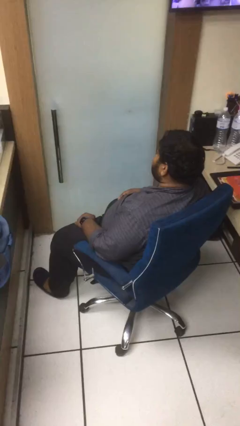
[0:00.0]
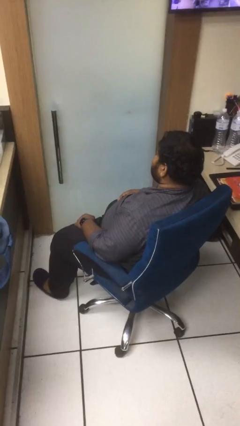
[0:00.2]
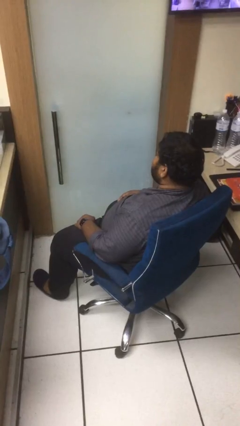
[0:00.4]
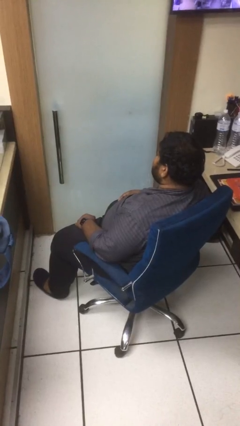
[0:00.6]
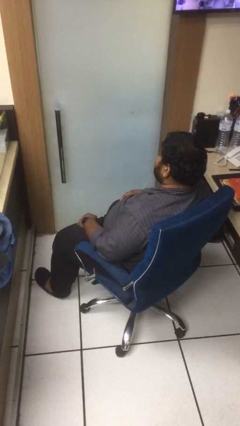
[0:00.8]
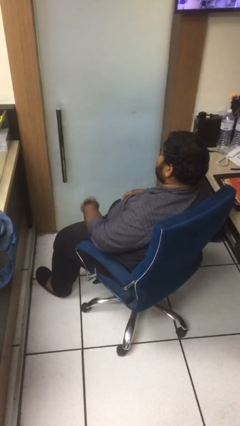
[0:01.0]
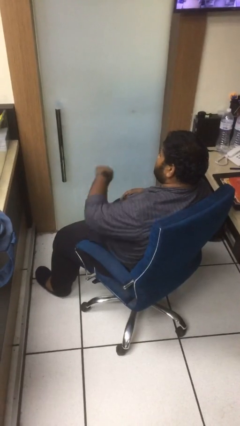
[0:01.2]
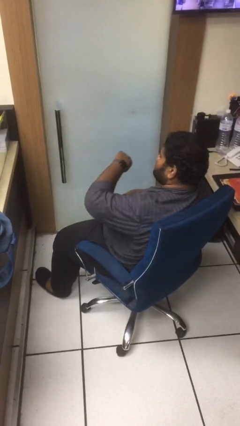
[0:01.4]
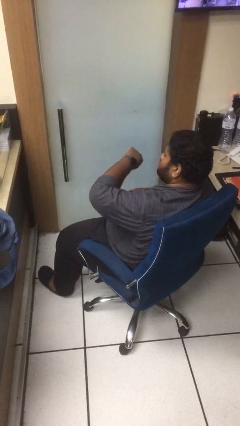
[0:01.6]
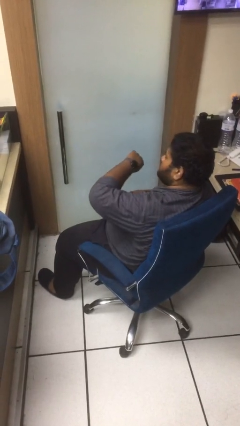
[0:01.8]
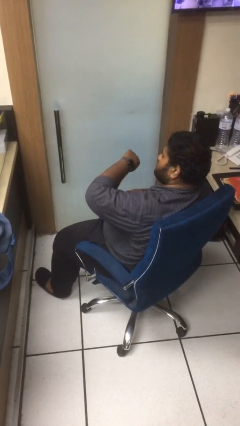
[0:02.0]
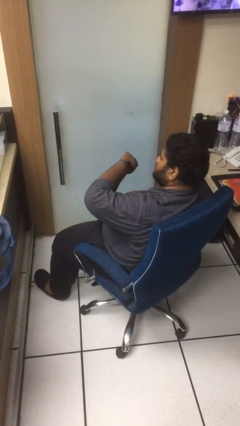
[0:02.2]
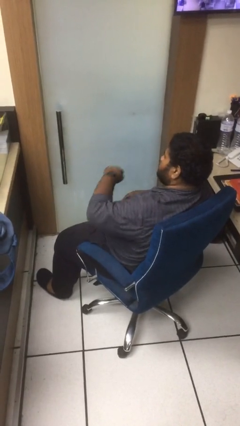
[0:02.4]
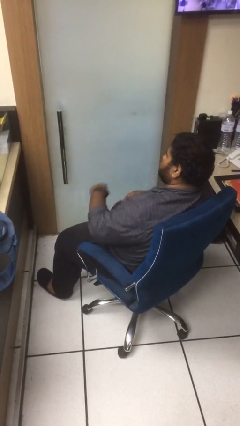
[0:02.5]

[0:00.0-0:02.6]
person looks at wristwatch

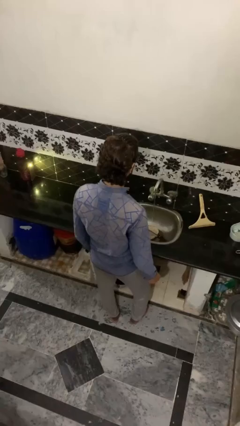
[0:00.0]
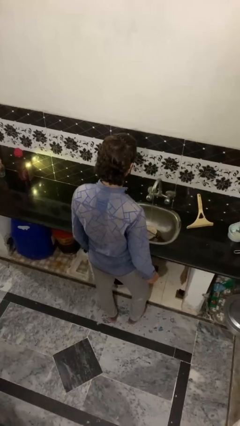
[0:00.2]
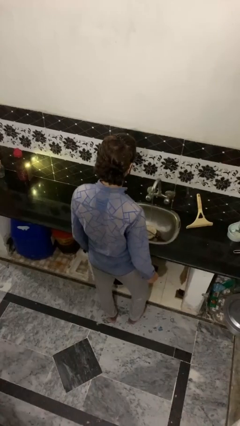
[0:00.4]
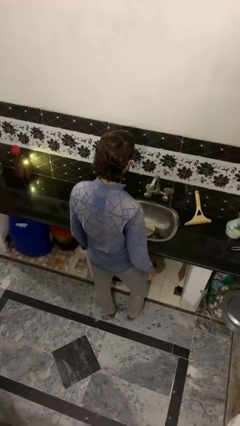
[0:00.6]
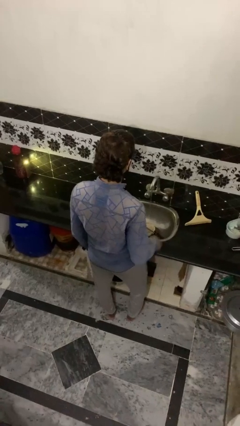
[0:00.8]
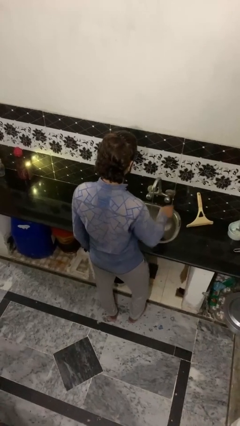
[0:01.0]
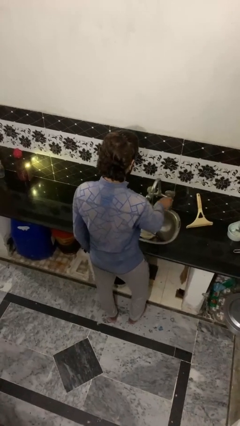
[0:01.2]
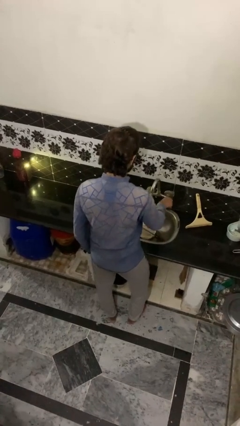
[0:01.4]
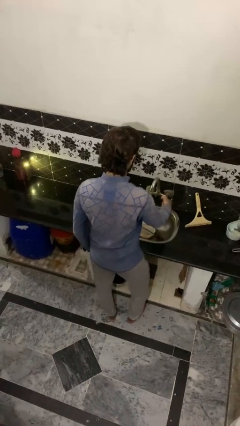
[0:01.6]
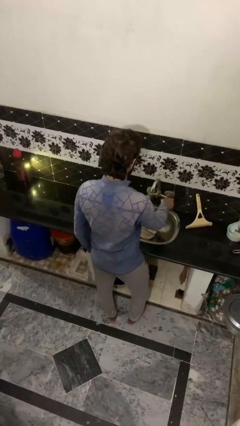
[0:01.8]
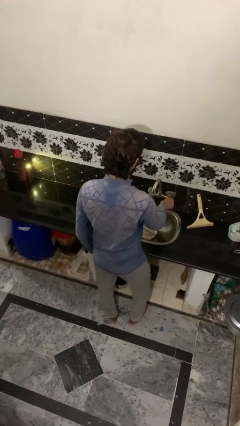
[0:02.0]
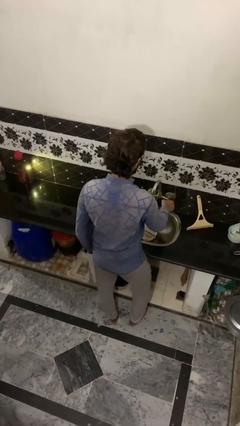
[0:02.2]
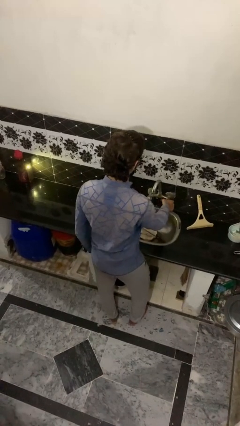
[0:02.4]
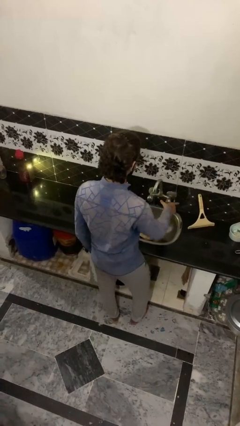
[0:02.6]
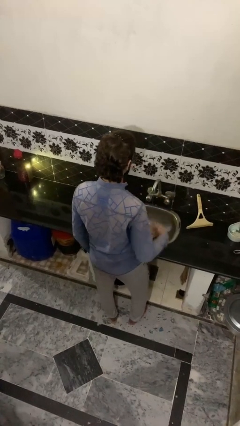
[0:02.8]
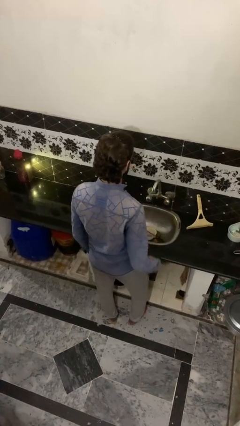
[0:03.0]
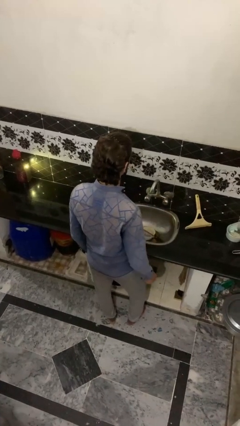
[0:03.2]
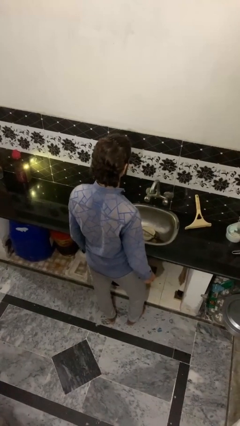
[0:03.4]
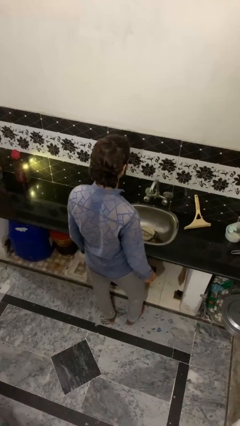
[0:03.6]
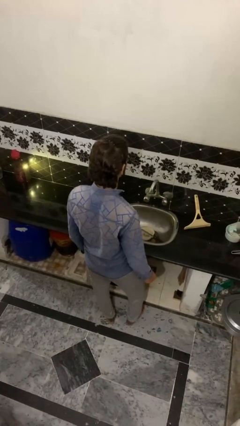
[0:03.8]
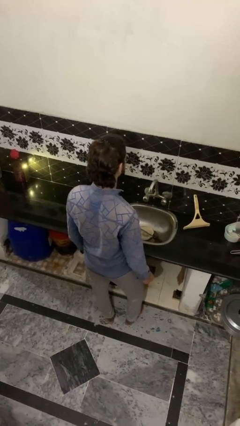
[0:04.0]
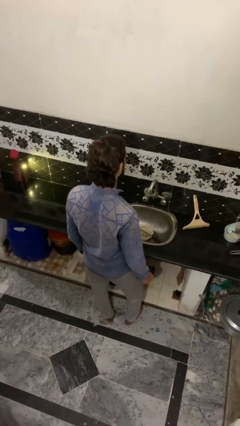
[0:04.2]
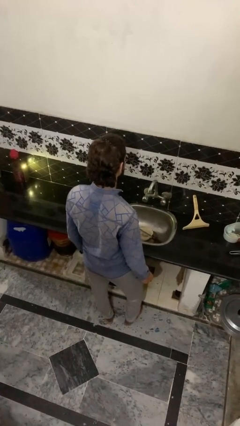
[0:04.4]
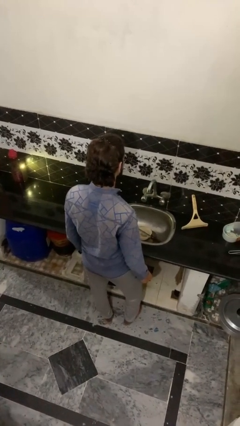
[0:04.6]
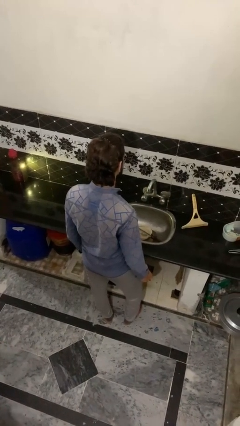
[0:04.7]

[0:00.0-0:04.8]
person turns off faucet

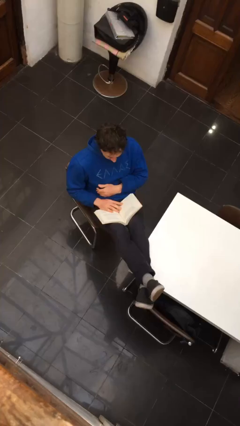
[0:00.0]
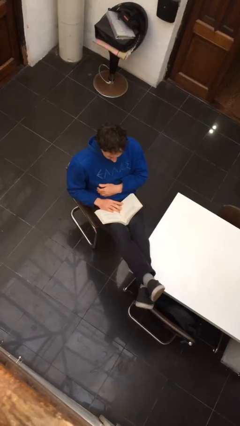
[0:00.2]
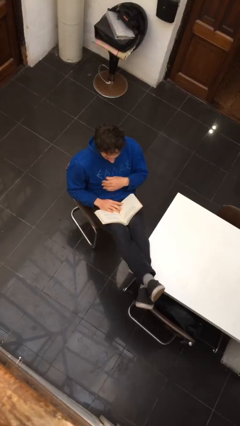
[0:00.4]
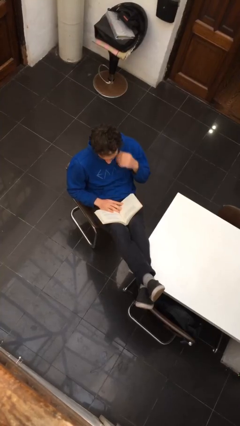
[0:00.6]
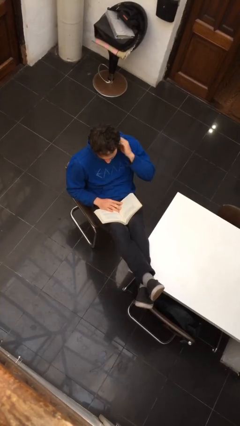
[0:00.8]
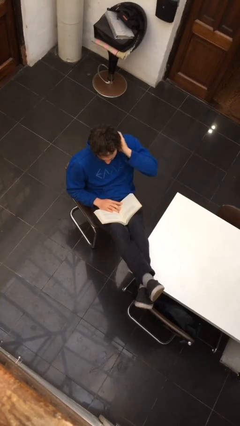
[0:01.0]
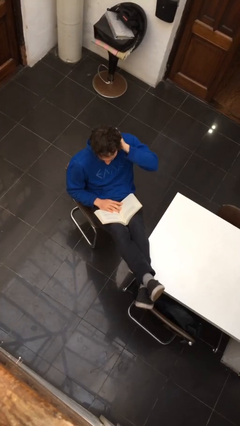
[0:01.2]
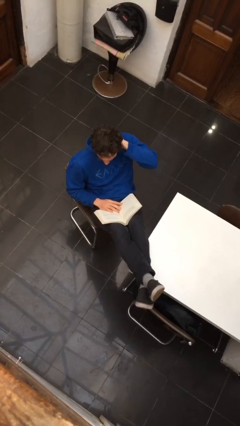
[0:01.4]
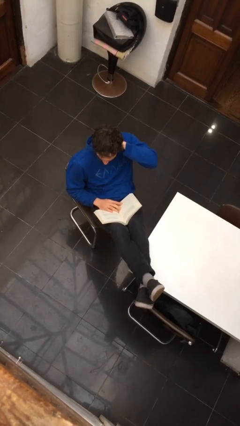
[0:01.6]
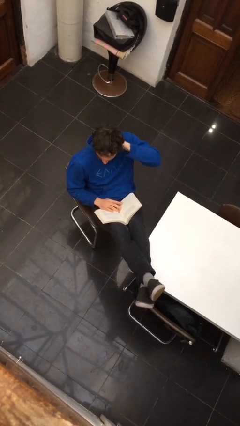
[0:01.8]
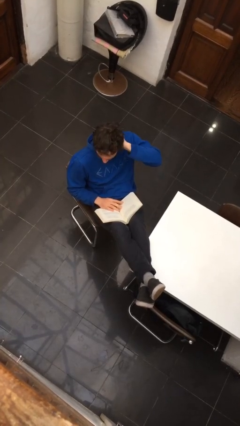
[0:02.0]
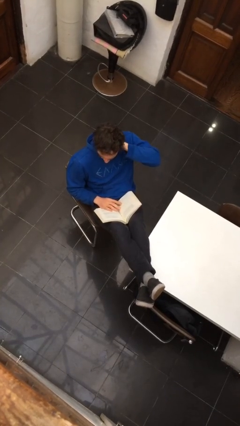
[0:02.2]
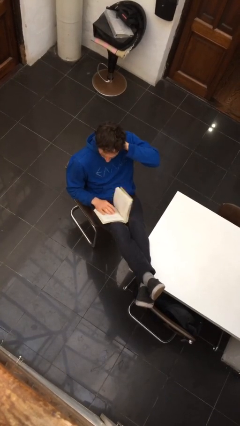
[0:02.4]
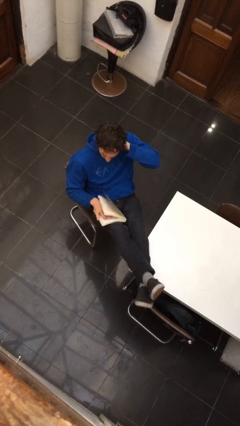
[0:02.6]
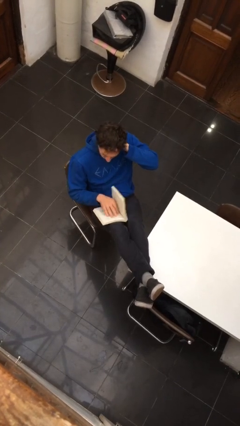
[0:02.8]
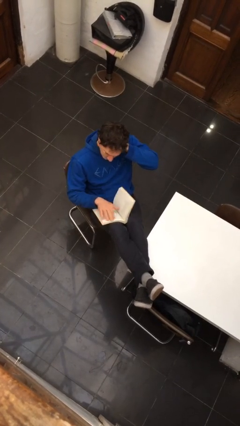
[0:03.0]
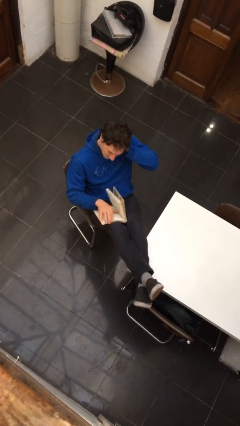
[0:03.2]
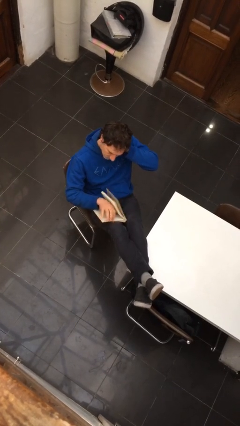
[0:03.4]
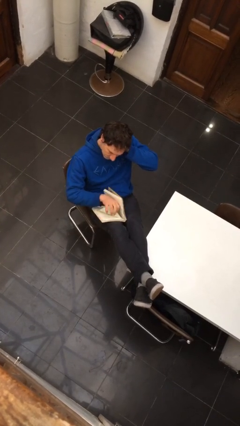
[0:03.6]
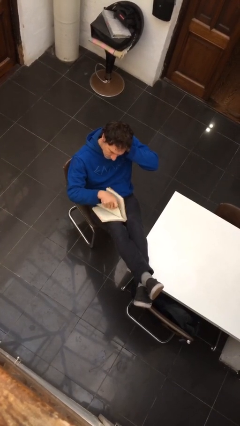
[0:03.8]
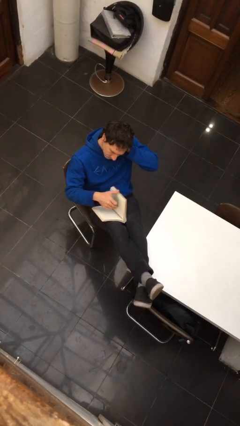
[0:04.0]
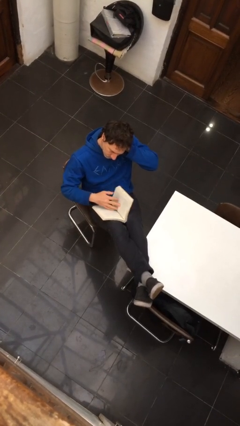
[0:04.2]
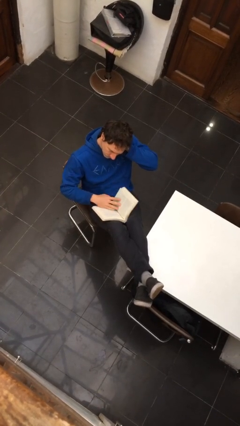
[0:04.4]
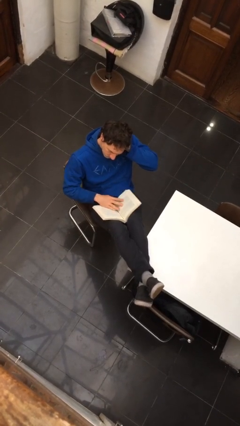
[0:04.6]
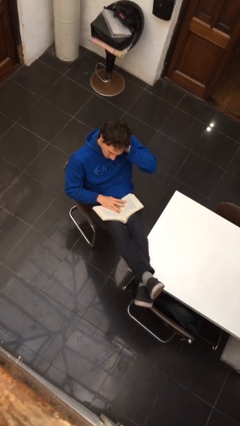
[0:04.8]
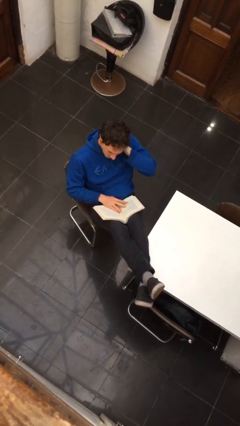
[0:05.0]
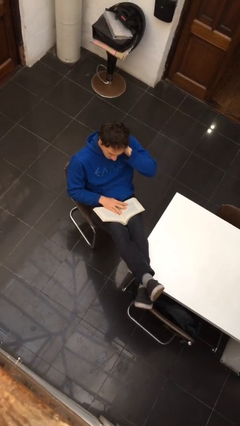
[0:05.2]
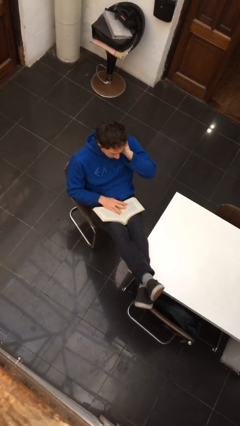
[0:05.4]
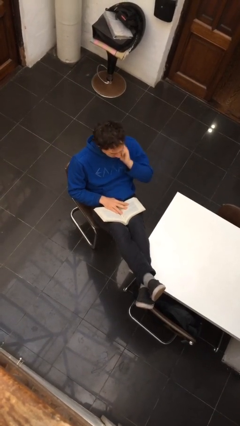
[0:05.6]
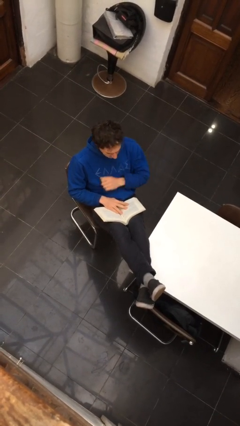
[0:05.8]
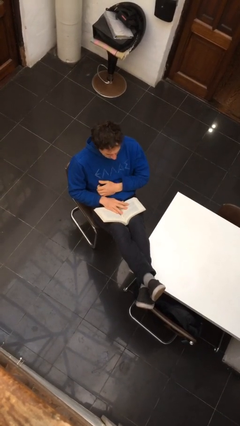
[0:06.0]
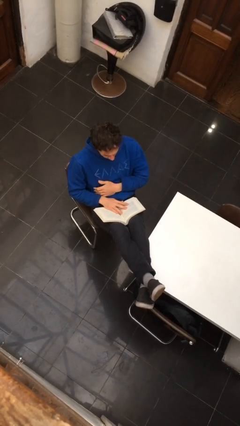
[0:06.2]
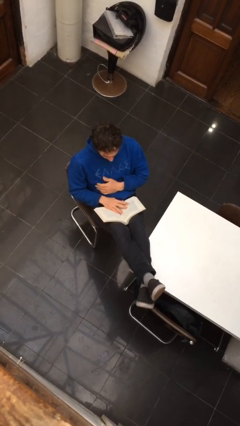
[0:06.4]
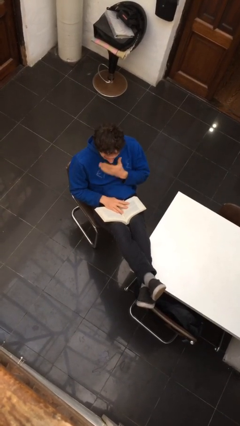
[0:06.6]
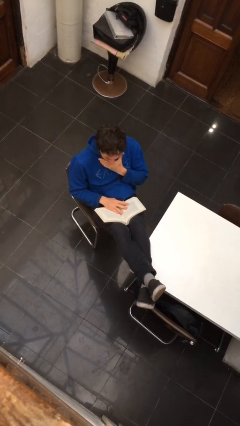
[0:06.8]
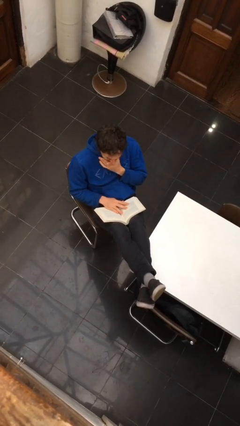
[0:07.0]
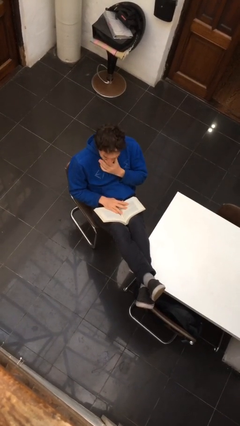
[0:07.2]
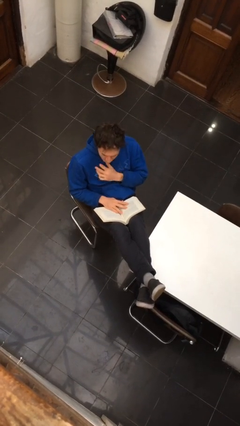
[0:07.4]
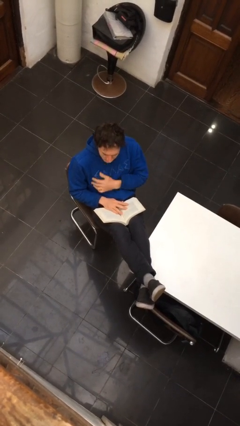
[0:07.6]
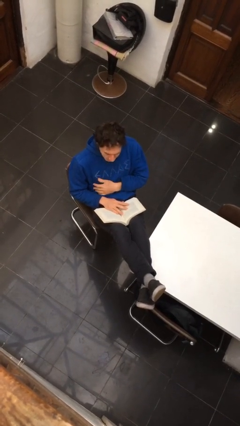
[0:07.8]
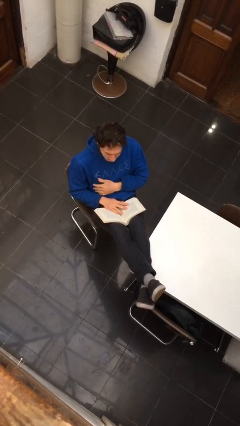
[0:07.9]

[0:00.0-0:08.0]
person reads document

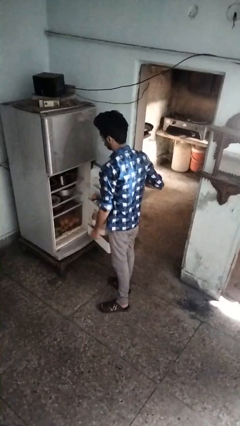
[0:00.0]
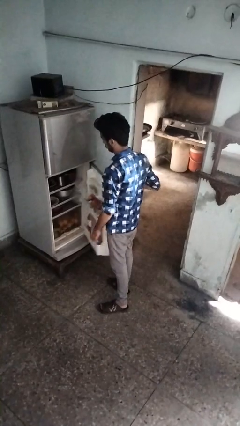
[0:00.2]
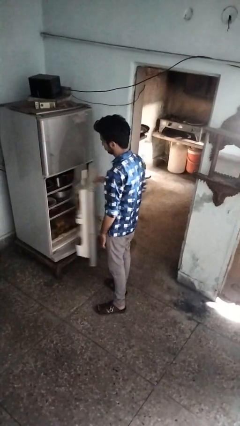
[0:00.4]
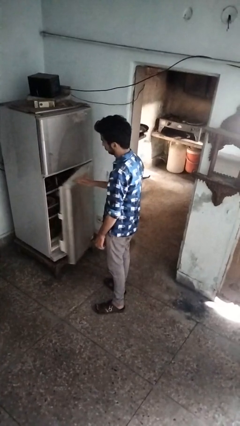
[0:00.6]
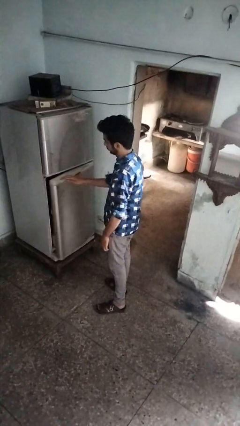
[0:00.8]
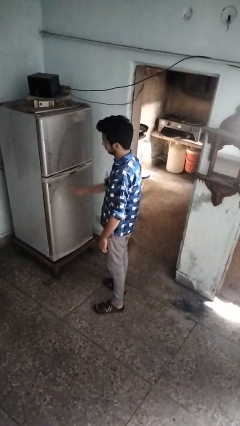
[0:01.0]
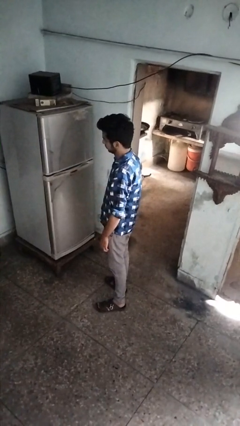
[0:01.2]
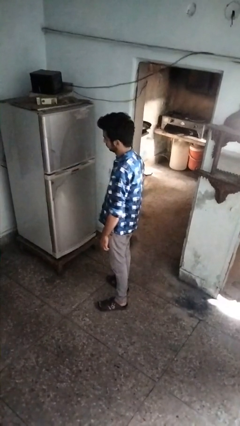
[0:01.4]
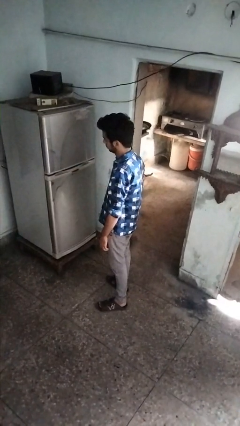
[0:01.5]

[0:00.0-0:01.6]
person closes refrigerator

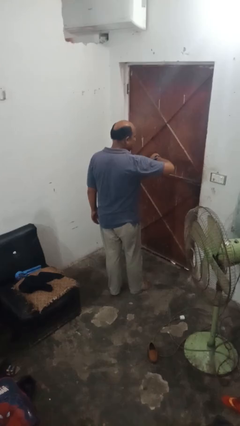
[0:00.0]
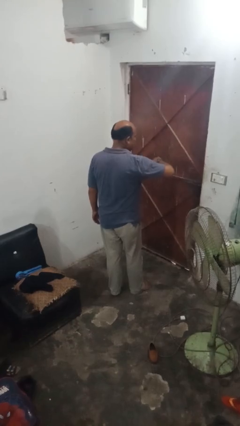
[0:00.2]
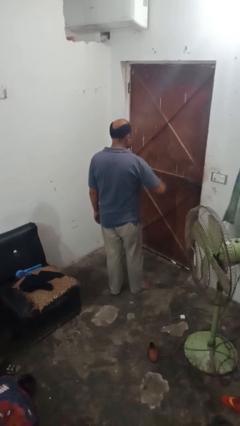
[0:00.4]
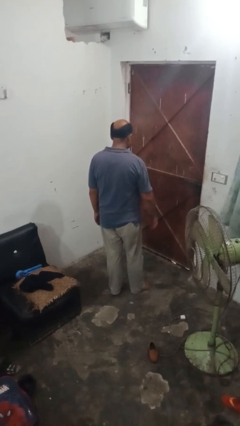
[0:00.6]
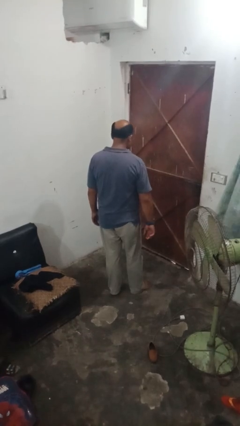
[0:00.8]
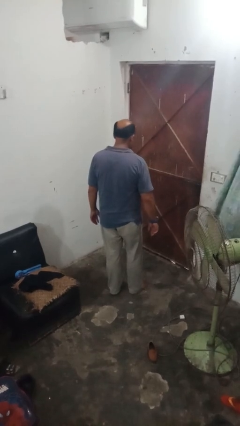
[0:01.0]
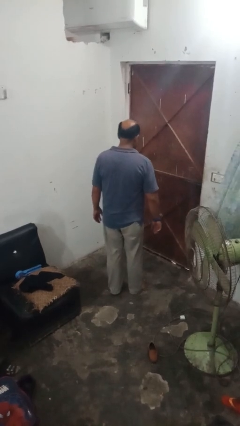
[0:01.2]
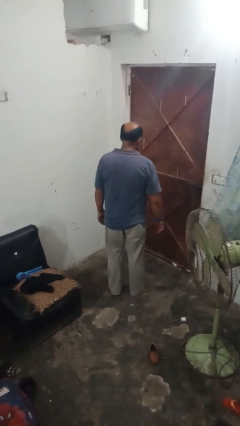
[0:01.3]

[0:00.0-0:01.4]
person takes off wristwatch
